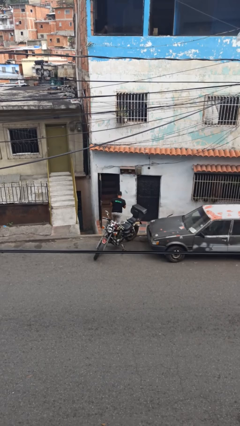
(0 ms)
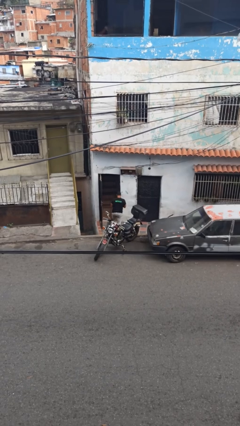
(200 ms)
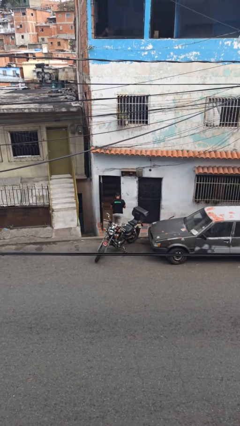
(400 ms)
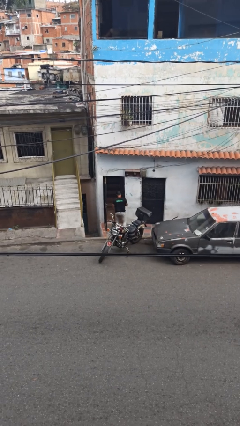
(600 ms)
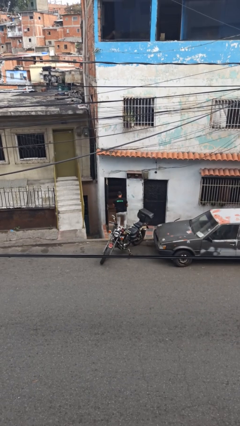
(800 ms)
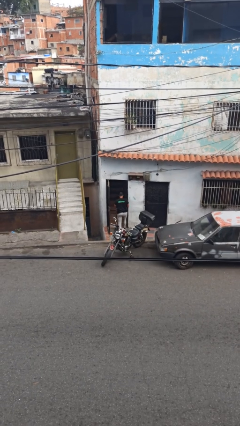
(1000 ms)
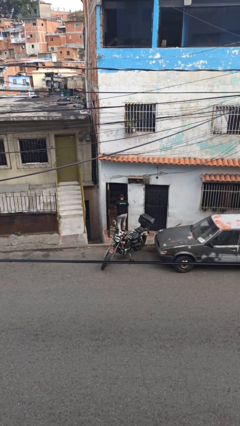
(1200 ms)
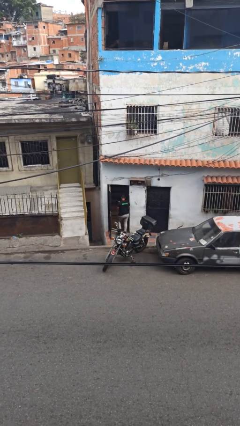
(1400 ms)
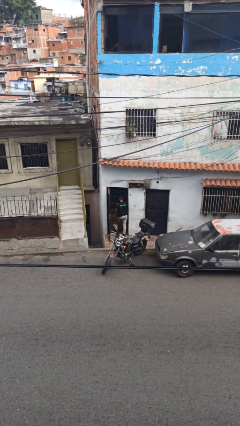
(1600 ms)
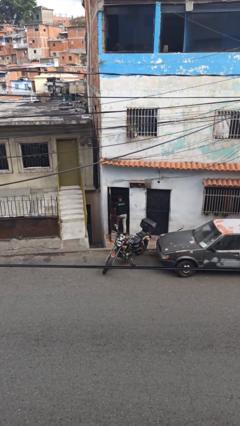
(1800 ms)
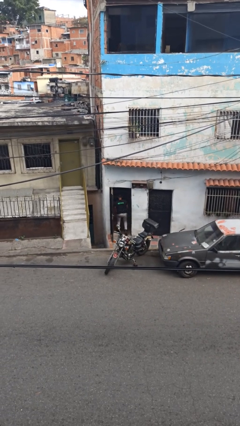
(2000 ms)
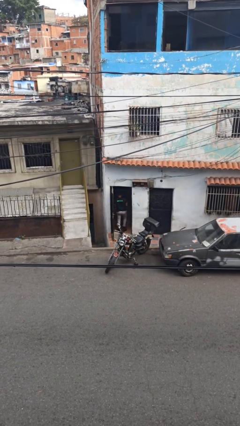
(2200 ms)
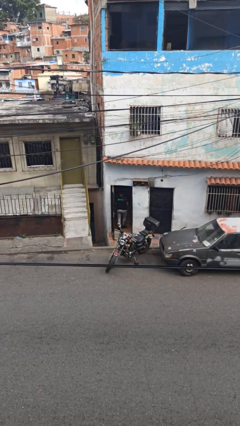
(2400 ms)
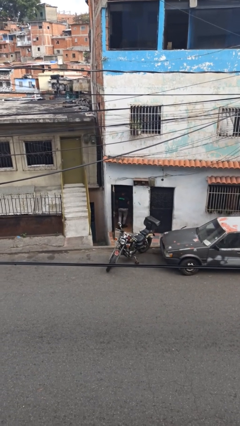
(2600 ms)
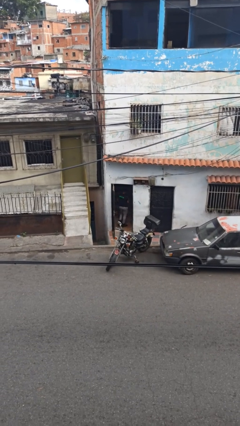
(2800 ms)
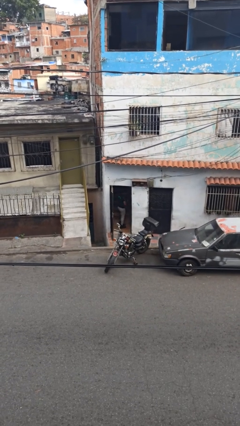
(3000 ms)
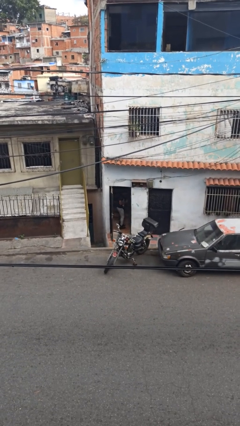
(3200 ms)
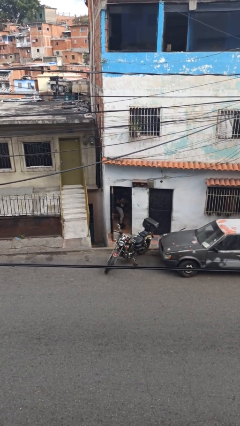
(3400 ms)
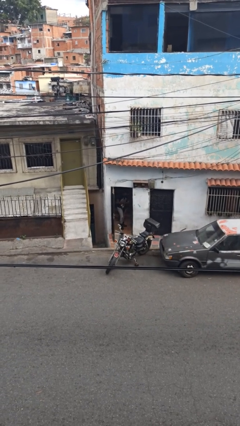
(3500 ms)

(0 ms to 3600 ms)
person exits scene through structure

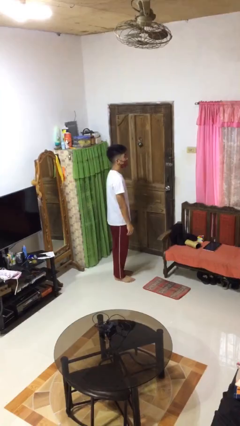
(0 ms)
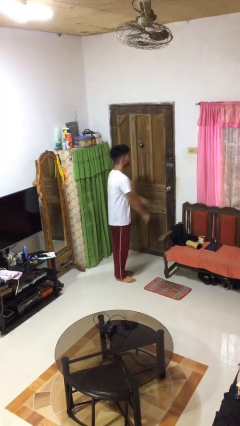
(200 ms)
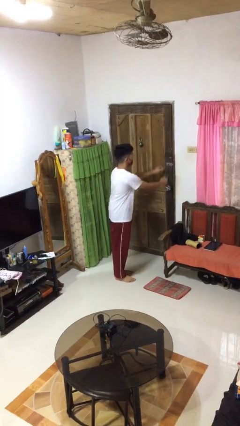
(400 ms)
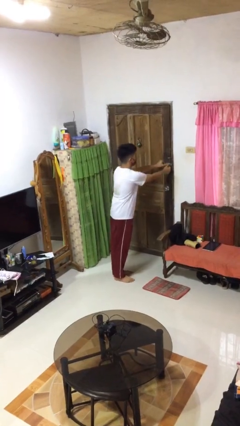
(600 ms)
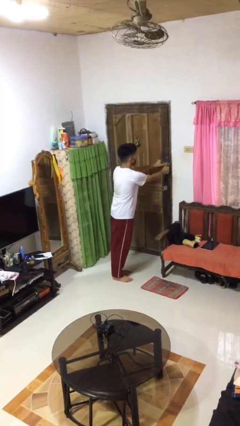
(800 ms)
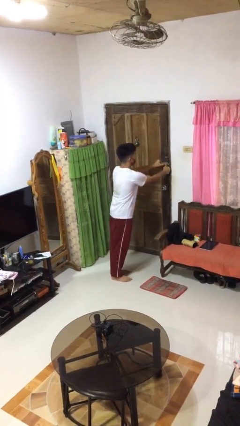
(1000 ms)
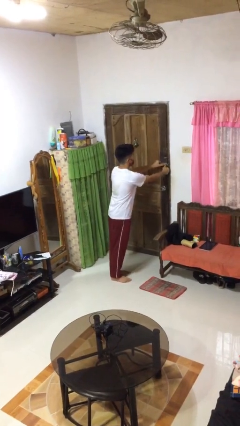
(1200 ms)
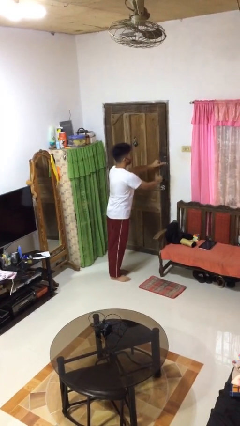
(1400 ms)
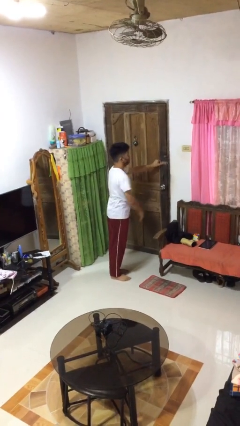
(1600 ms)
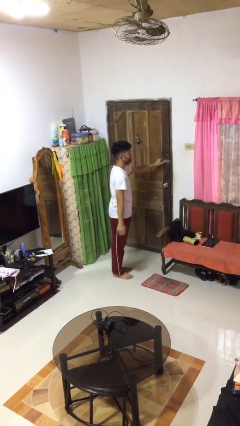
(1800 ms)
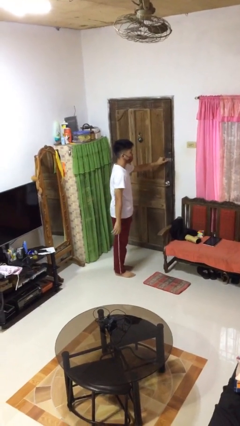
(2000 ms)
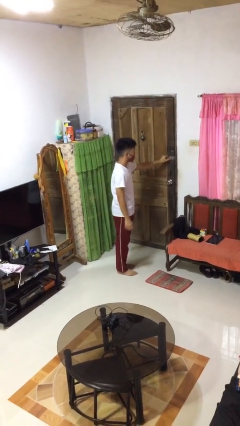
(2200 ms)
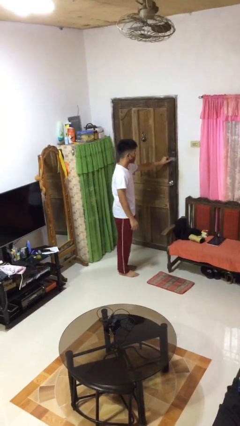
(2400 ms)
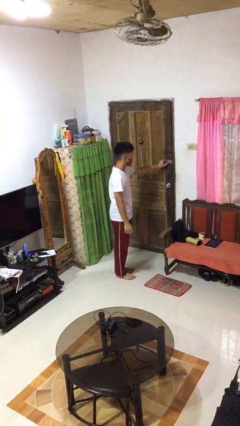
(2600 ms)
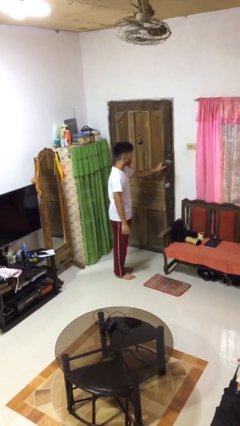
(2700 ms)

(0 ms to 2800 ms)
person unlocks door with keys

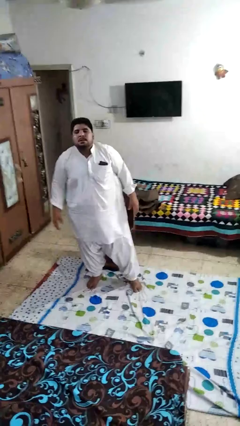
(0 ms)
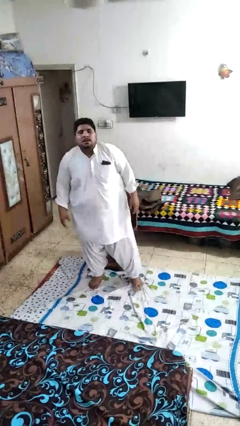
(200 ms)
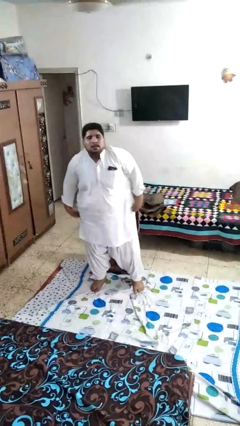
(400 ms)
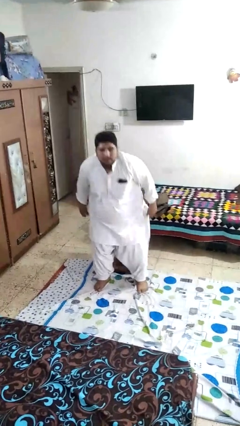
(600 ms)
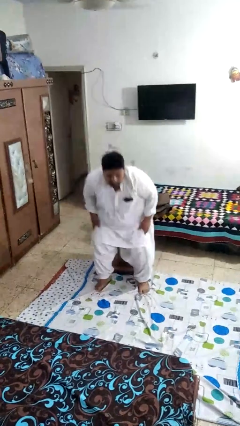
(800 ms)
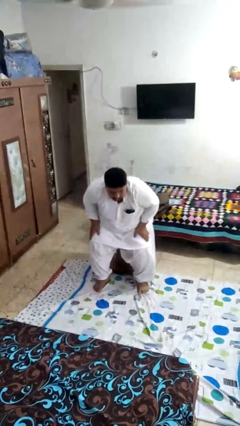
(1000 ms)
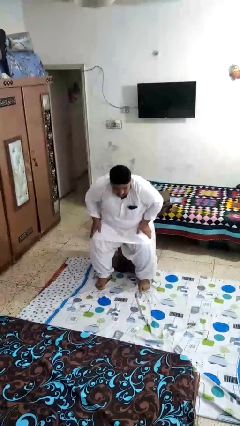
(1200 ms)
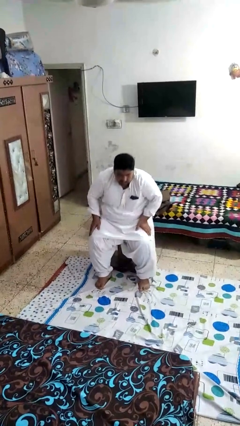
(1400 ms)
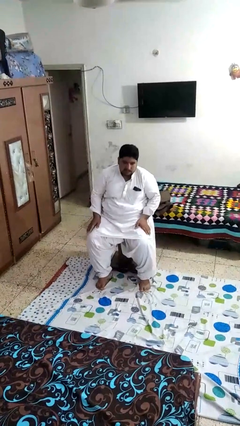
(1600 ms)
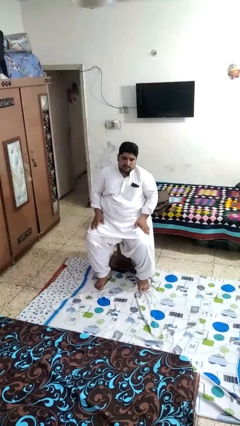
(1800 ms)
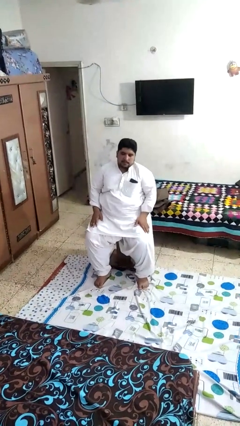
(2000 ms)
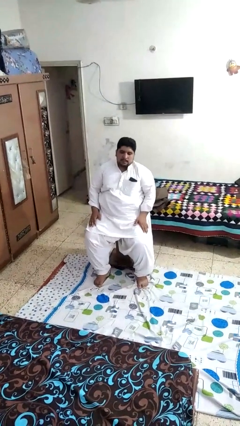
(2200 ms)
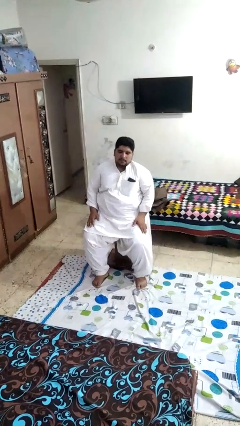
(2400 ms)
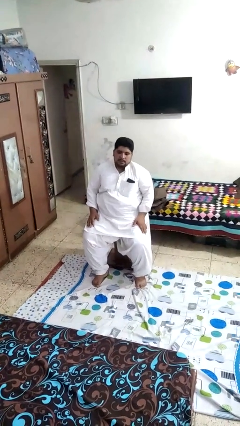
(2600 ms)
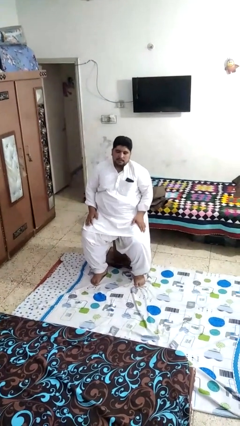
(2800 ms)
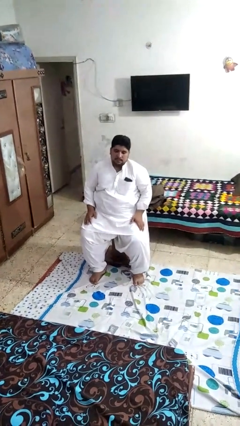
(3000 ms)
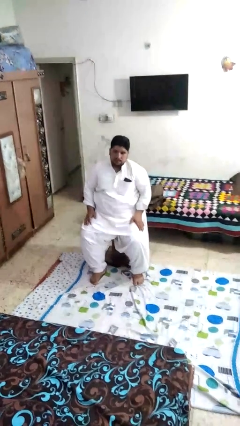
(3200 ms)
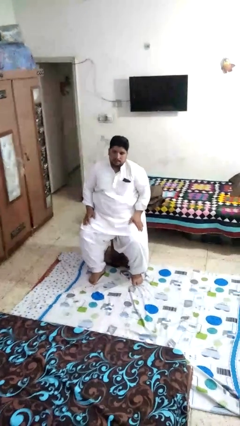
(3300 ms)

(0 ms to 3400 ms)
person sits down

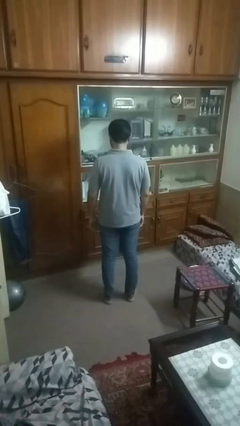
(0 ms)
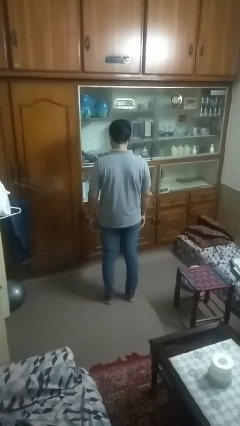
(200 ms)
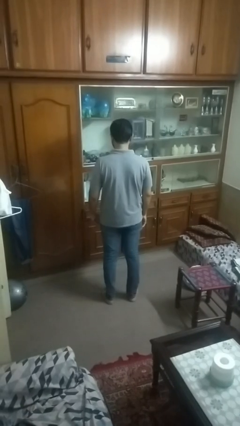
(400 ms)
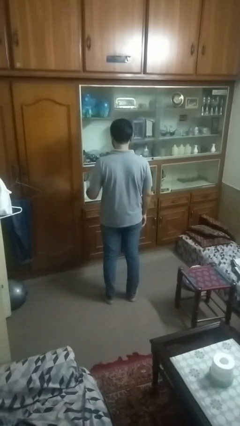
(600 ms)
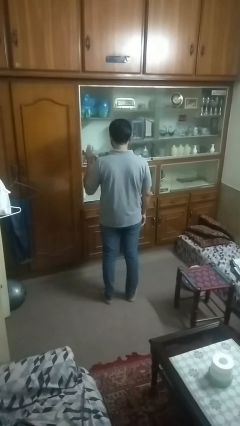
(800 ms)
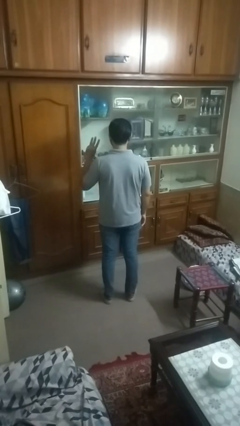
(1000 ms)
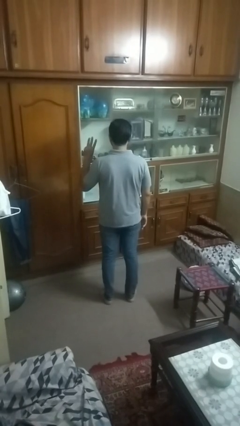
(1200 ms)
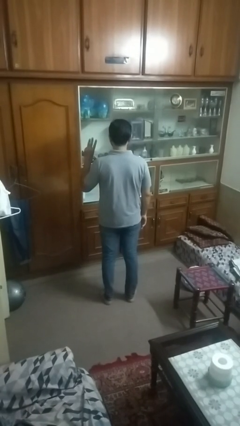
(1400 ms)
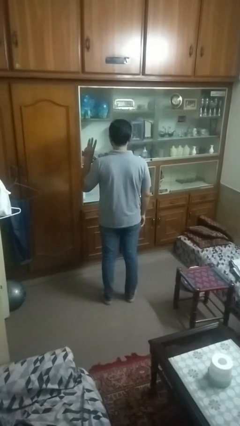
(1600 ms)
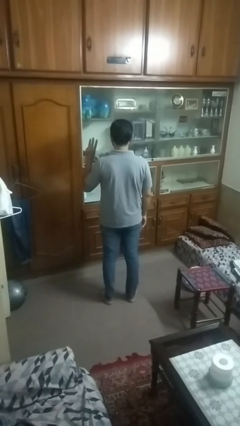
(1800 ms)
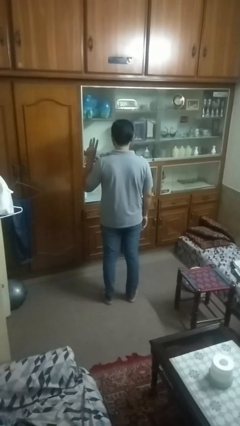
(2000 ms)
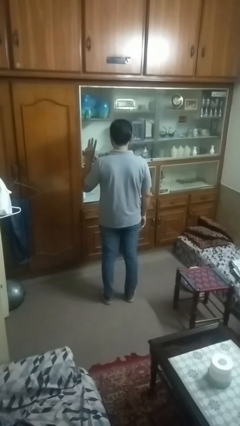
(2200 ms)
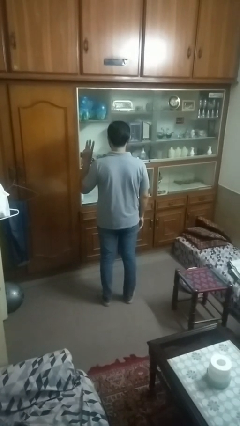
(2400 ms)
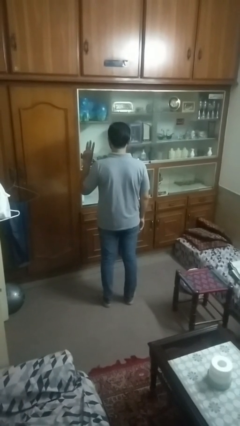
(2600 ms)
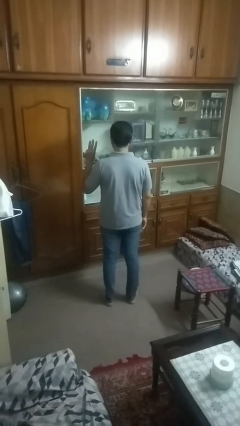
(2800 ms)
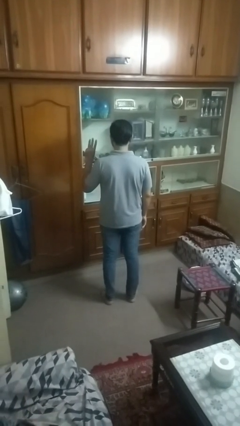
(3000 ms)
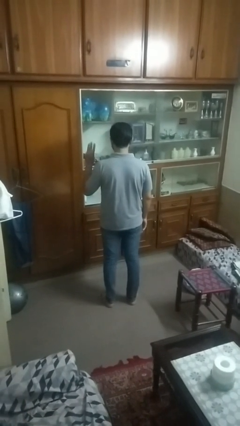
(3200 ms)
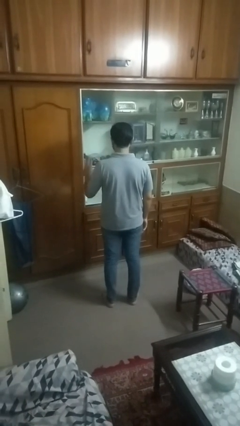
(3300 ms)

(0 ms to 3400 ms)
person gestures number three

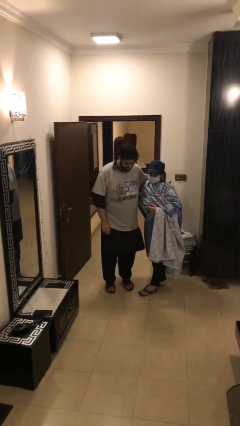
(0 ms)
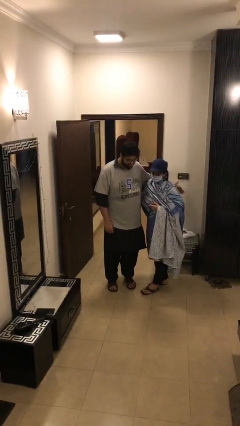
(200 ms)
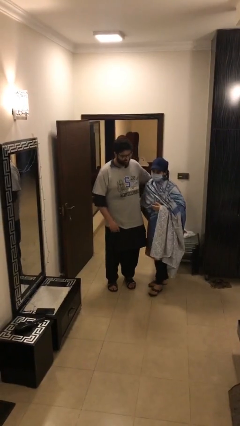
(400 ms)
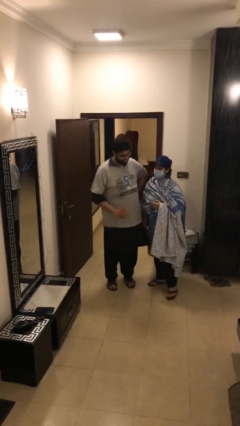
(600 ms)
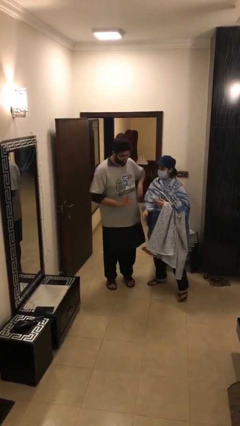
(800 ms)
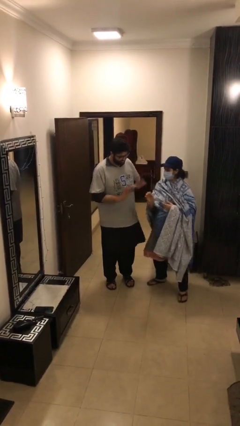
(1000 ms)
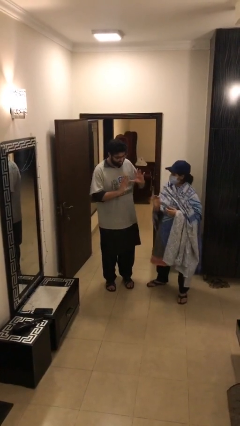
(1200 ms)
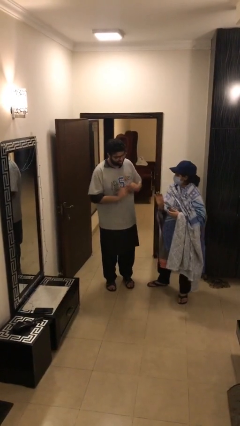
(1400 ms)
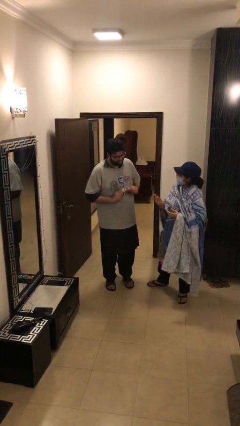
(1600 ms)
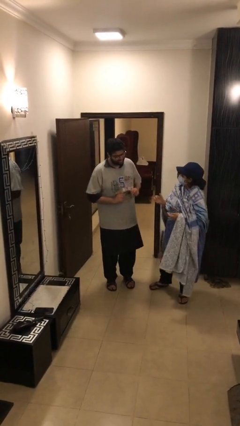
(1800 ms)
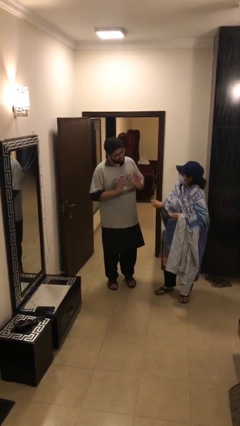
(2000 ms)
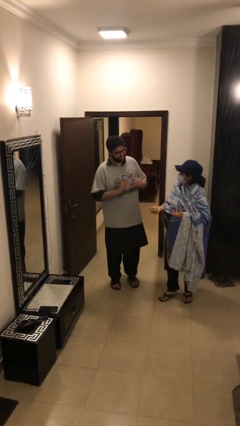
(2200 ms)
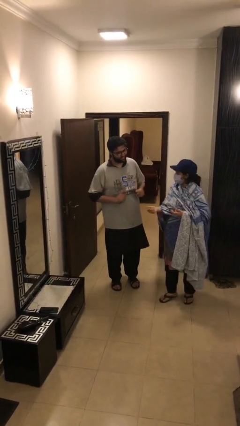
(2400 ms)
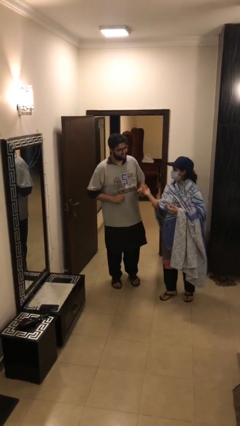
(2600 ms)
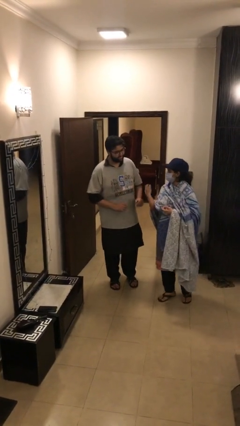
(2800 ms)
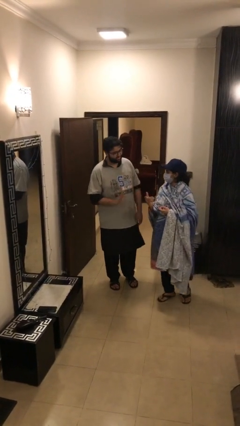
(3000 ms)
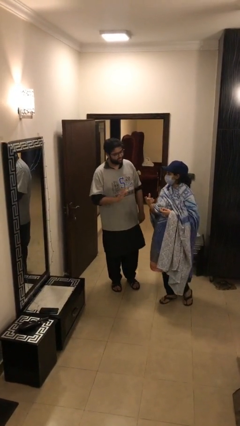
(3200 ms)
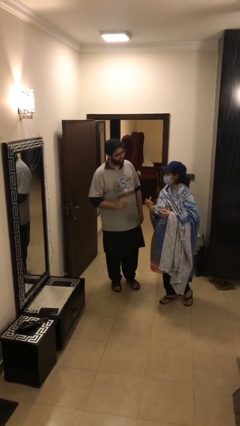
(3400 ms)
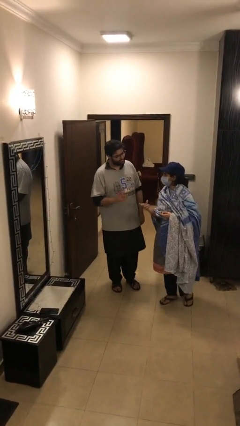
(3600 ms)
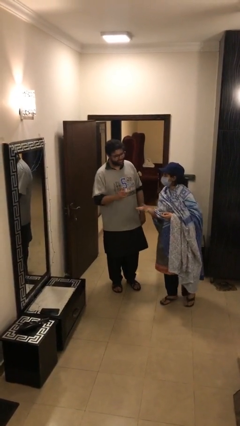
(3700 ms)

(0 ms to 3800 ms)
person talks to person

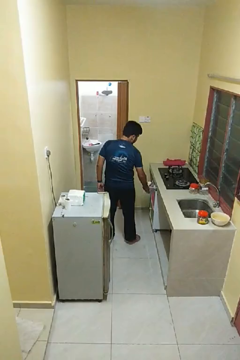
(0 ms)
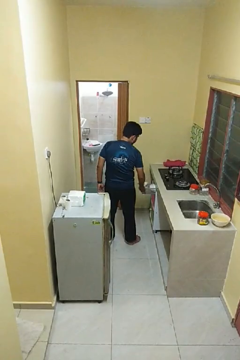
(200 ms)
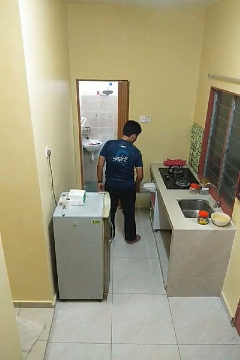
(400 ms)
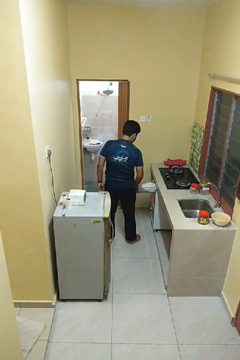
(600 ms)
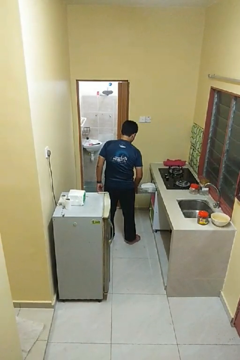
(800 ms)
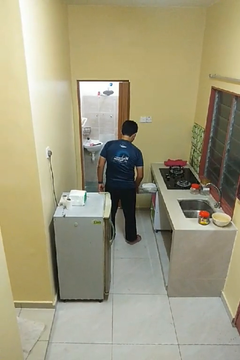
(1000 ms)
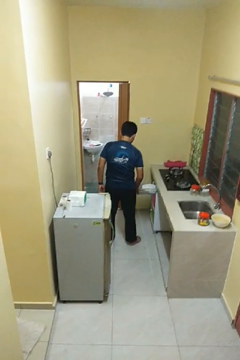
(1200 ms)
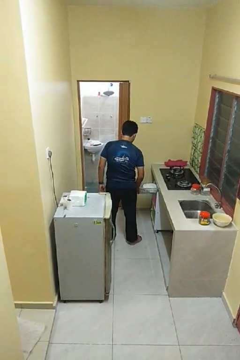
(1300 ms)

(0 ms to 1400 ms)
person opens kitchen drawer
